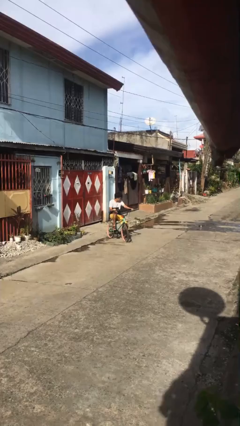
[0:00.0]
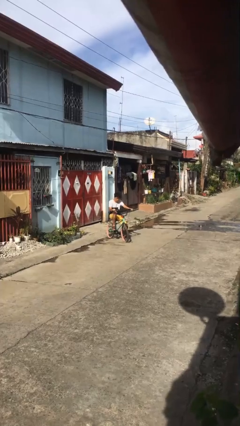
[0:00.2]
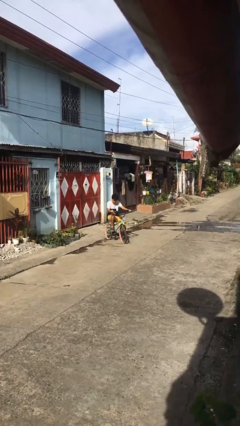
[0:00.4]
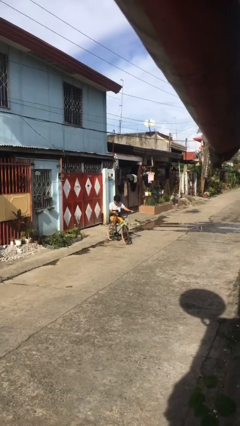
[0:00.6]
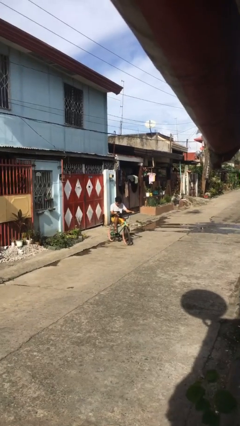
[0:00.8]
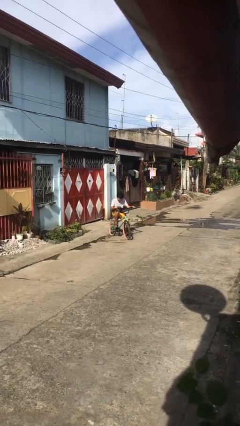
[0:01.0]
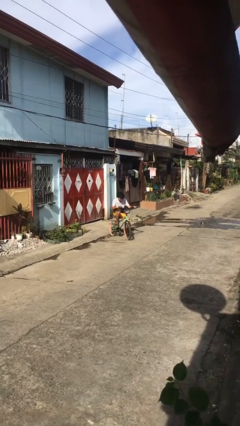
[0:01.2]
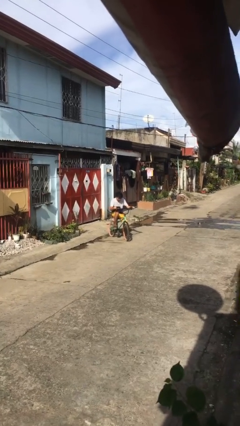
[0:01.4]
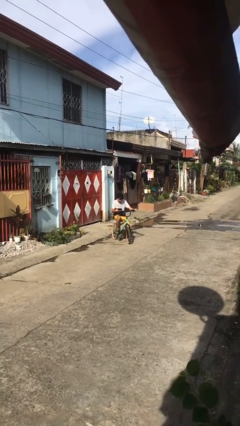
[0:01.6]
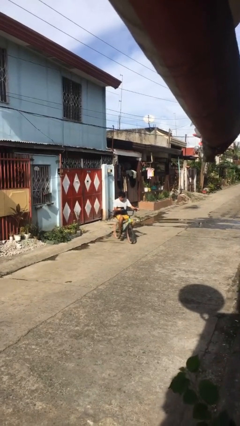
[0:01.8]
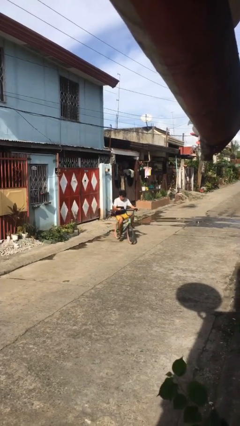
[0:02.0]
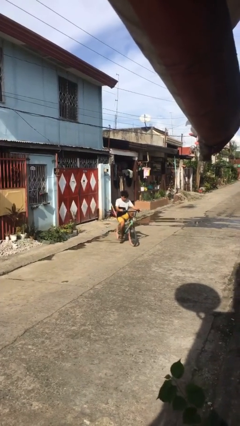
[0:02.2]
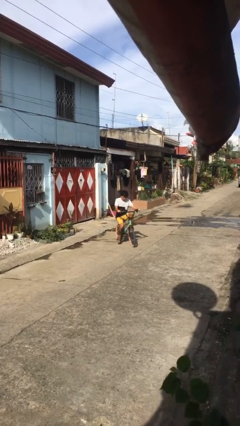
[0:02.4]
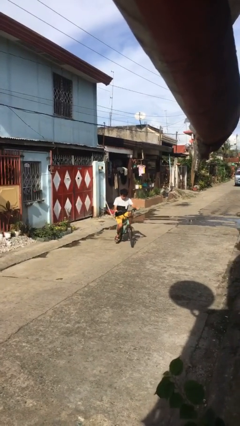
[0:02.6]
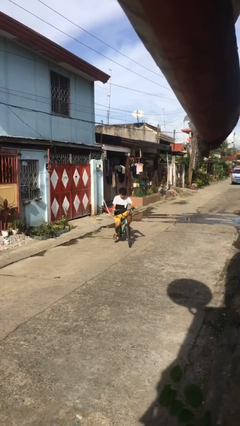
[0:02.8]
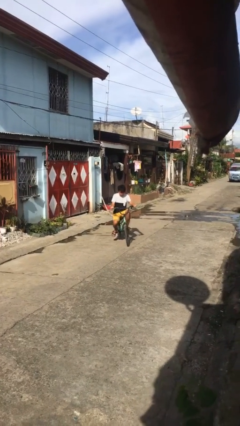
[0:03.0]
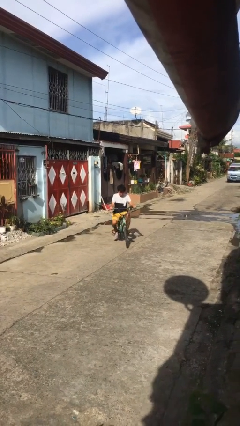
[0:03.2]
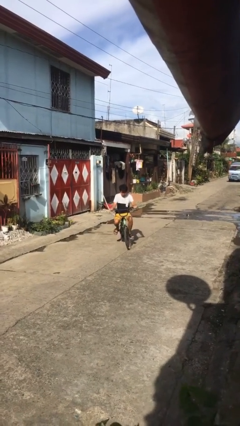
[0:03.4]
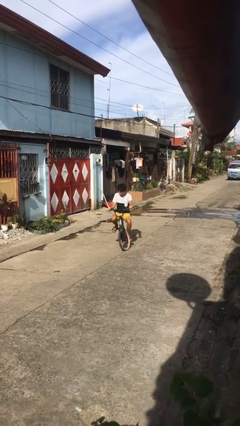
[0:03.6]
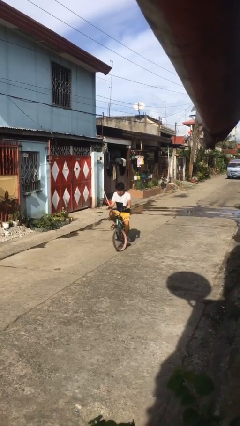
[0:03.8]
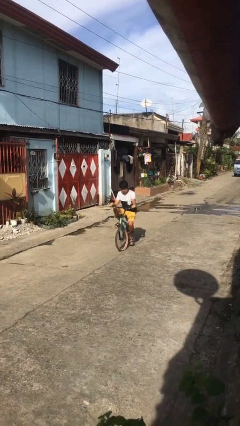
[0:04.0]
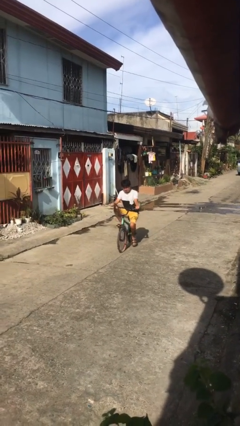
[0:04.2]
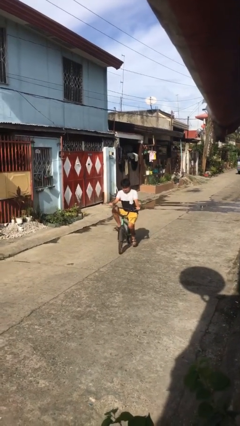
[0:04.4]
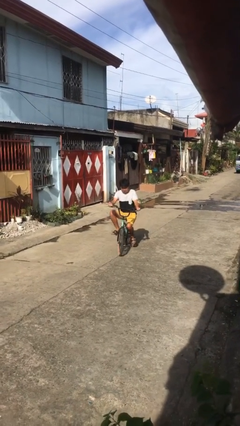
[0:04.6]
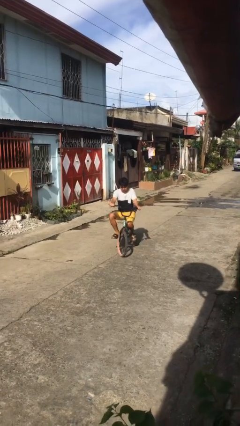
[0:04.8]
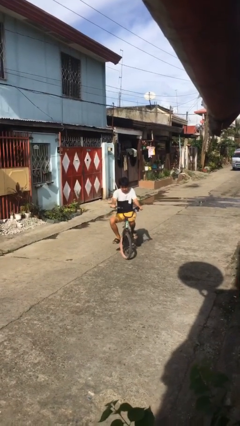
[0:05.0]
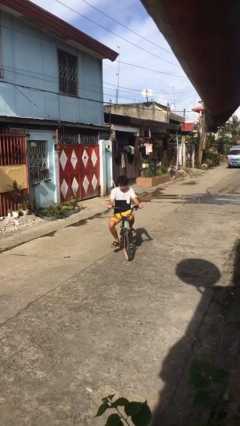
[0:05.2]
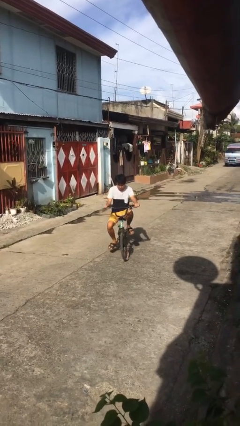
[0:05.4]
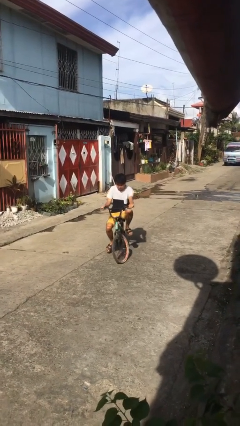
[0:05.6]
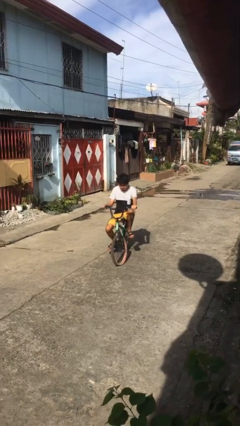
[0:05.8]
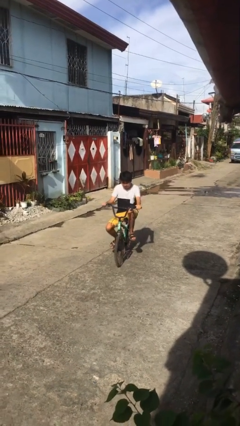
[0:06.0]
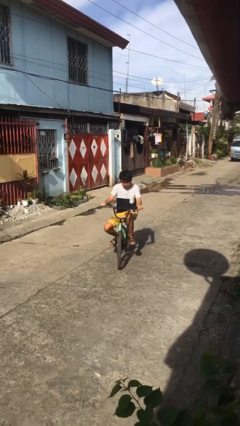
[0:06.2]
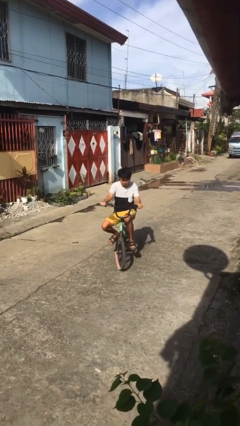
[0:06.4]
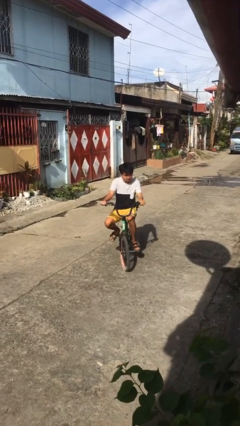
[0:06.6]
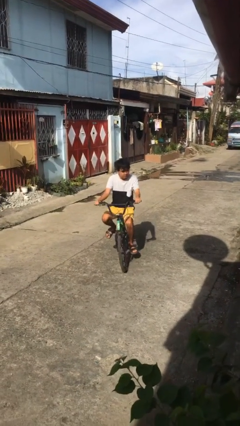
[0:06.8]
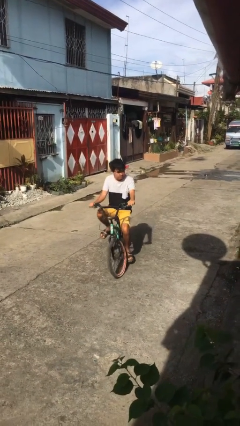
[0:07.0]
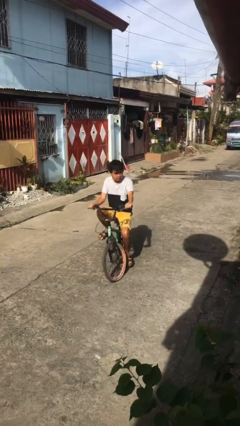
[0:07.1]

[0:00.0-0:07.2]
person rides bicycle

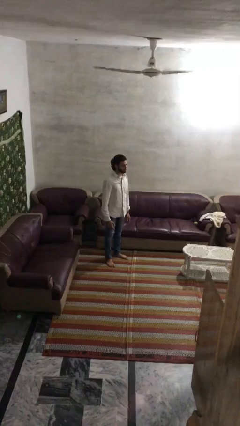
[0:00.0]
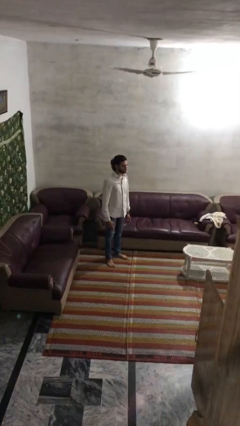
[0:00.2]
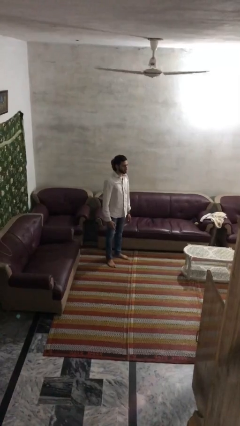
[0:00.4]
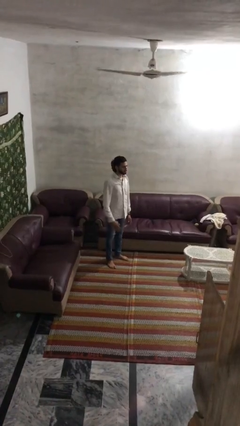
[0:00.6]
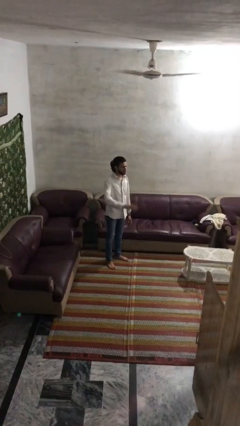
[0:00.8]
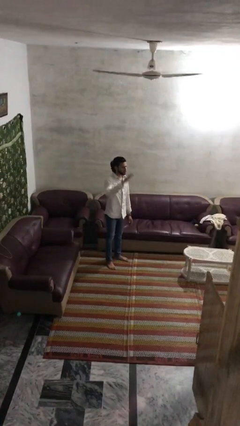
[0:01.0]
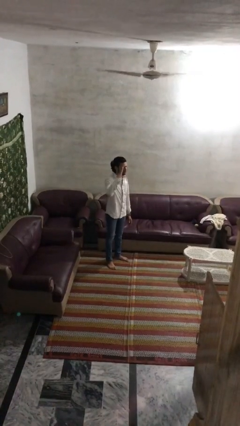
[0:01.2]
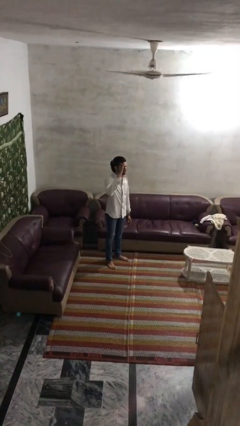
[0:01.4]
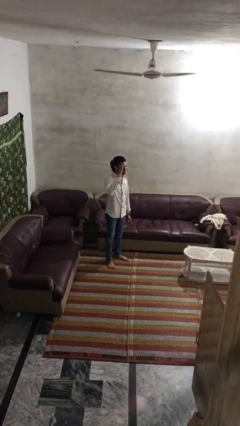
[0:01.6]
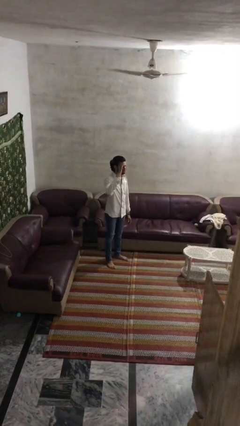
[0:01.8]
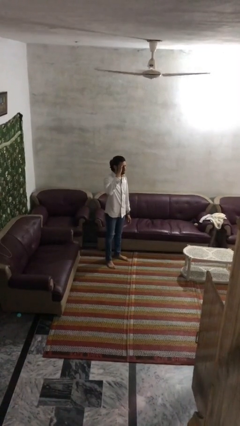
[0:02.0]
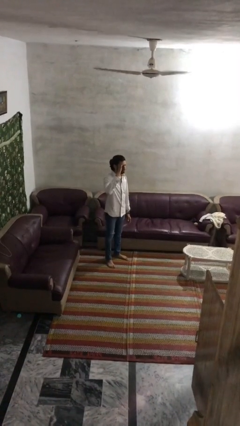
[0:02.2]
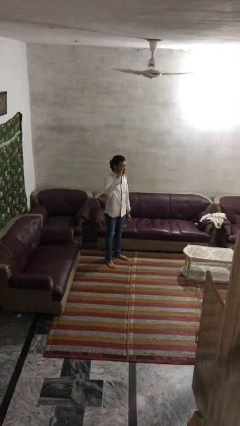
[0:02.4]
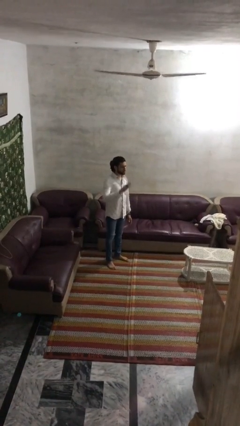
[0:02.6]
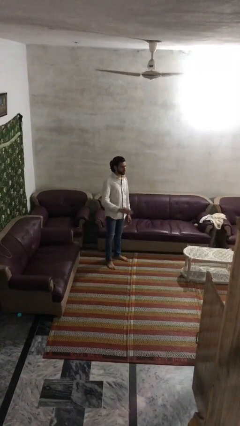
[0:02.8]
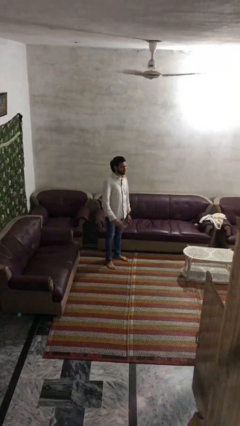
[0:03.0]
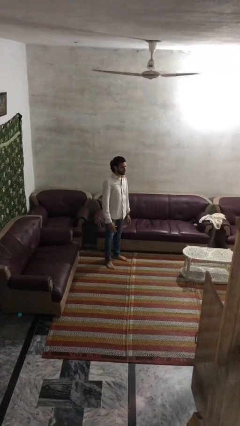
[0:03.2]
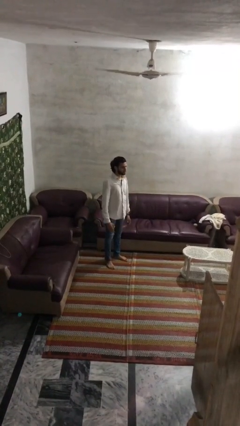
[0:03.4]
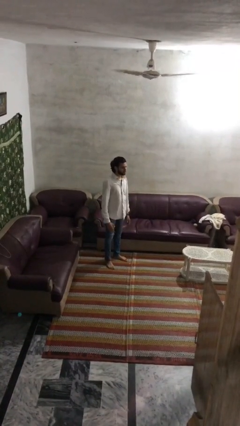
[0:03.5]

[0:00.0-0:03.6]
person salutes

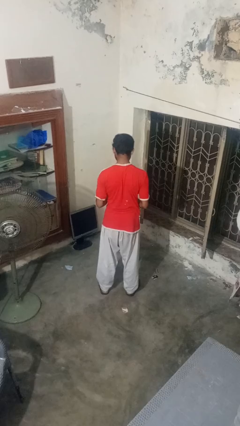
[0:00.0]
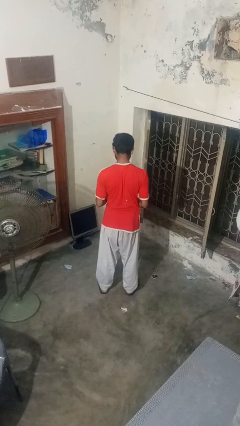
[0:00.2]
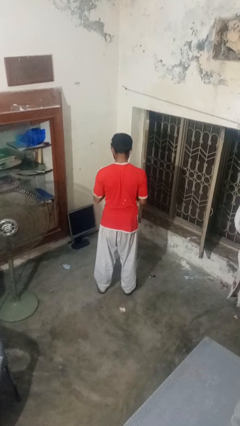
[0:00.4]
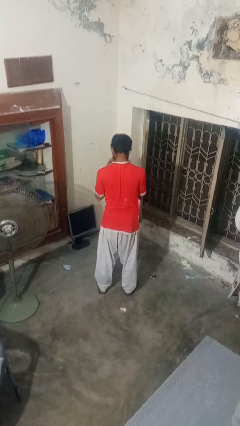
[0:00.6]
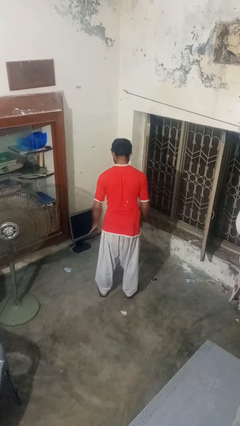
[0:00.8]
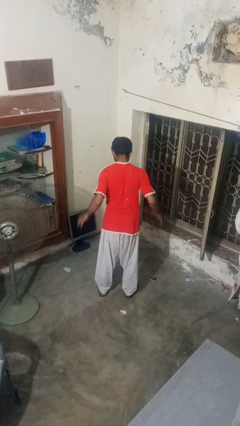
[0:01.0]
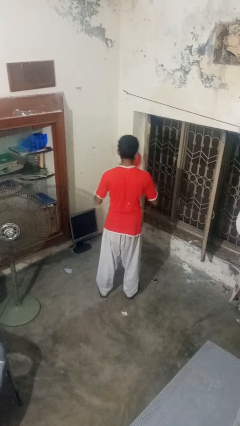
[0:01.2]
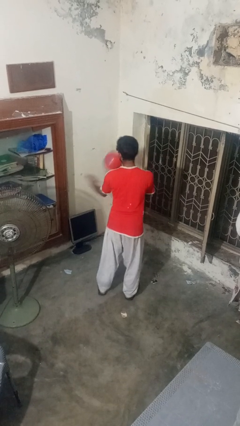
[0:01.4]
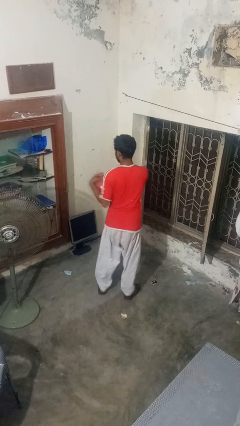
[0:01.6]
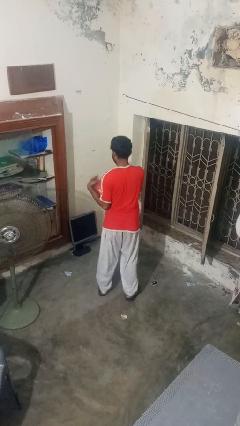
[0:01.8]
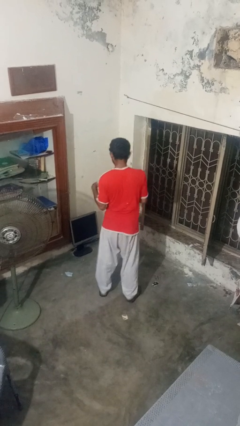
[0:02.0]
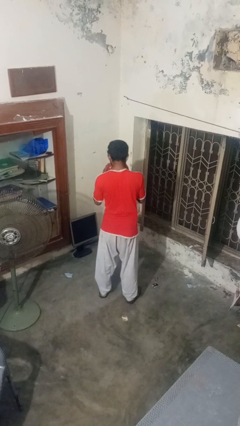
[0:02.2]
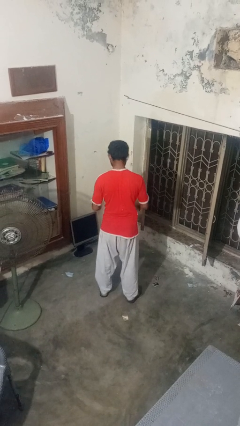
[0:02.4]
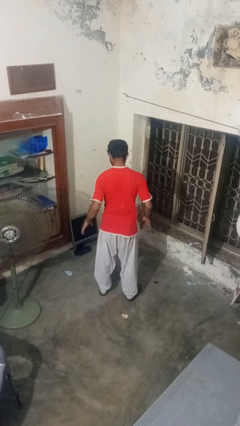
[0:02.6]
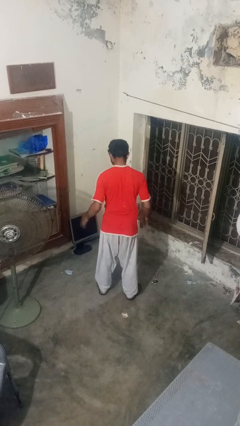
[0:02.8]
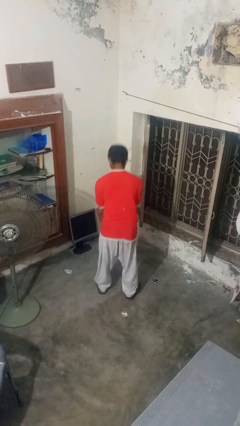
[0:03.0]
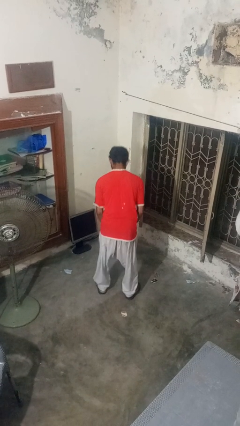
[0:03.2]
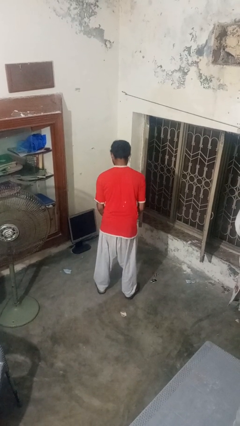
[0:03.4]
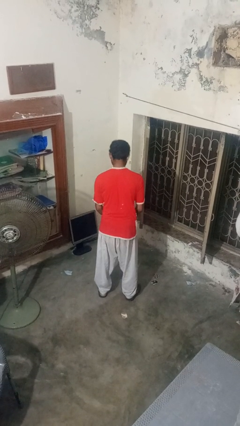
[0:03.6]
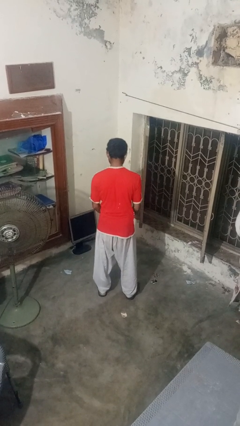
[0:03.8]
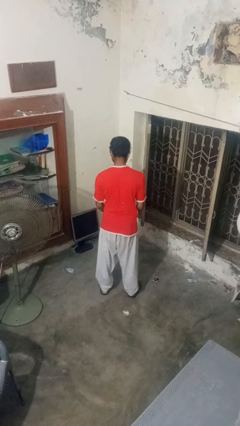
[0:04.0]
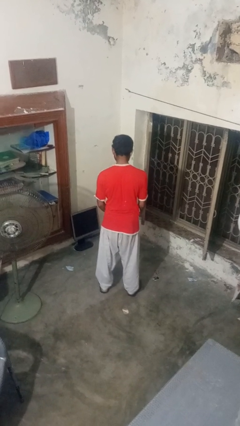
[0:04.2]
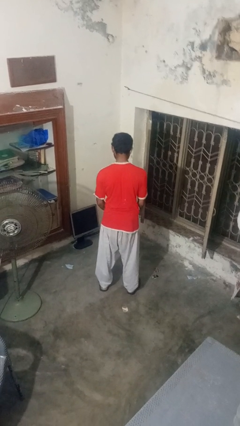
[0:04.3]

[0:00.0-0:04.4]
person bounces ball on floor

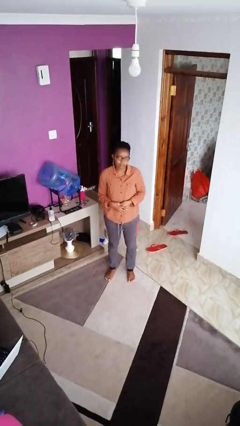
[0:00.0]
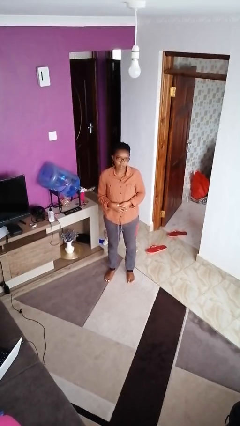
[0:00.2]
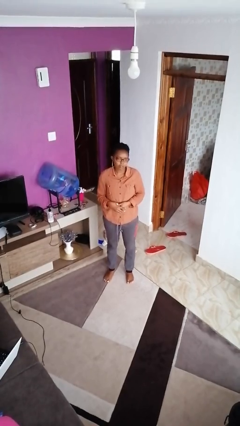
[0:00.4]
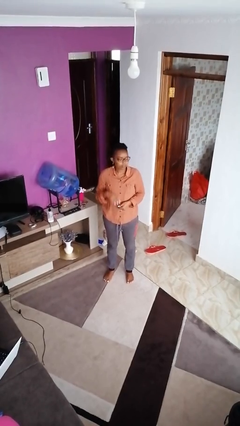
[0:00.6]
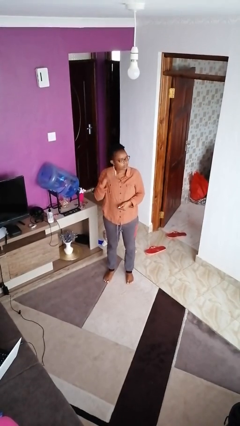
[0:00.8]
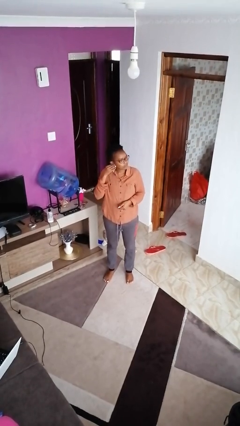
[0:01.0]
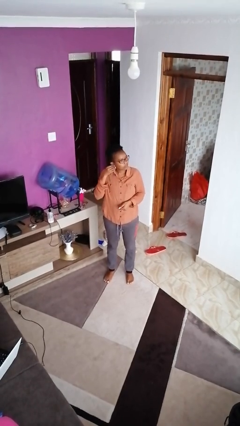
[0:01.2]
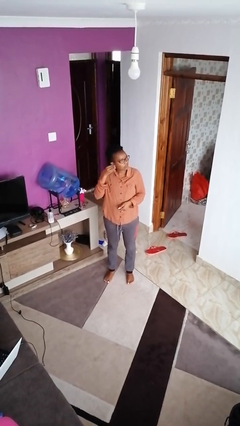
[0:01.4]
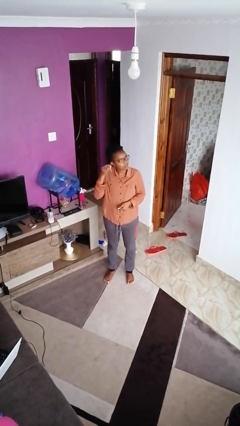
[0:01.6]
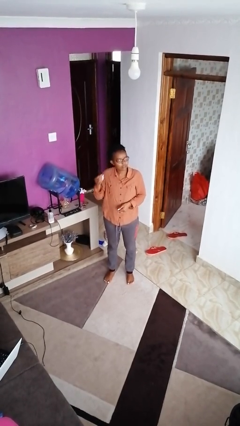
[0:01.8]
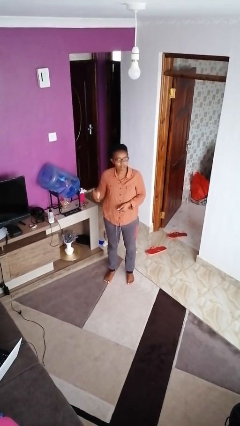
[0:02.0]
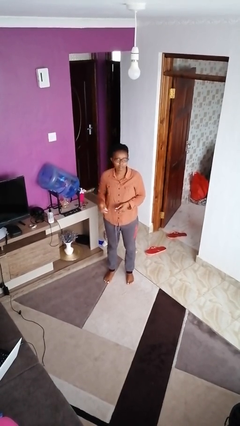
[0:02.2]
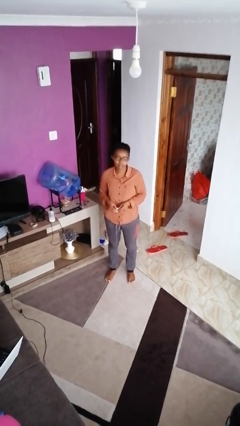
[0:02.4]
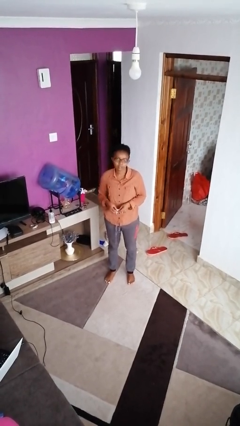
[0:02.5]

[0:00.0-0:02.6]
person takes off earrings
